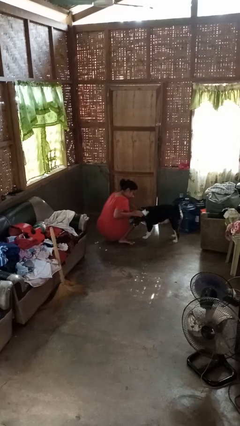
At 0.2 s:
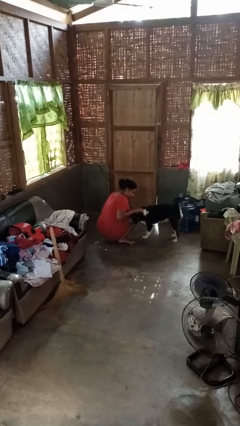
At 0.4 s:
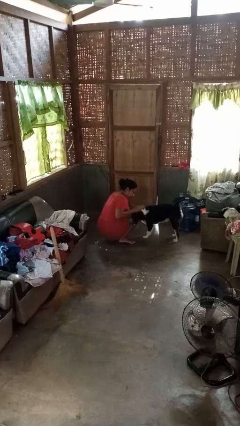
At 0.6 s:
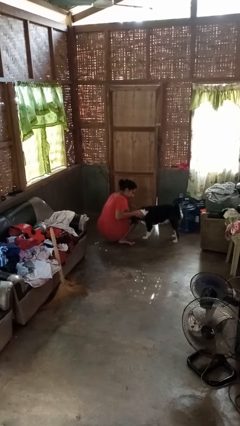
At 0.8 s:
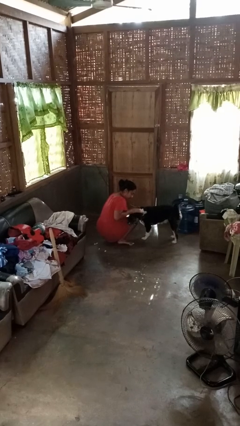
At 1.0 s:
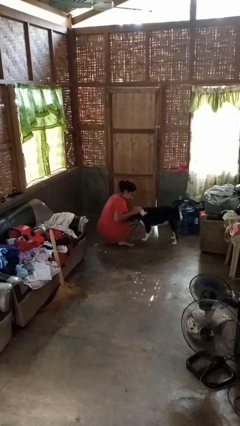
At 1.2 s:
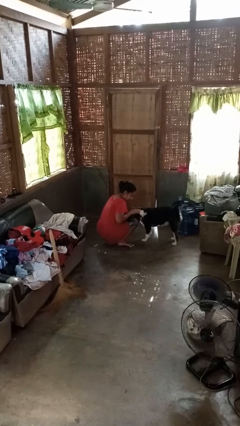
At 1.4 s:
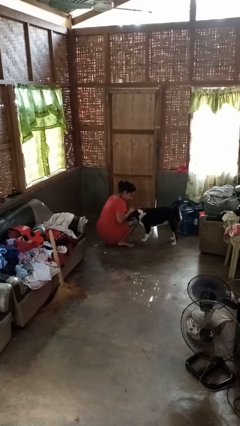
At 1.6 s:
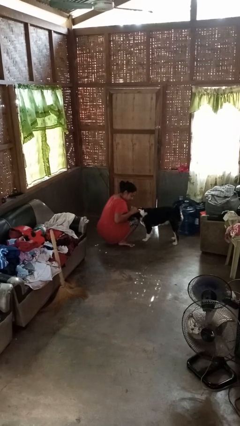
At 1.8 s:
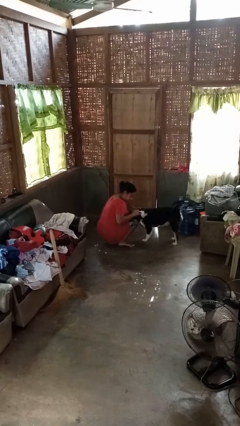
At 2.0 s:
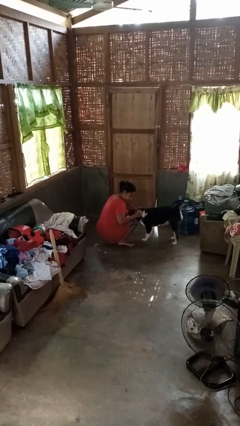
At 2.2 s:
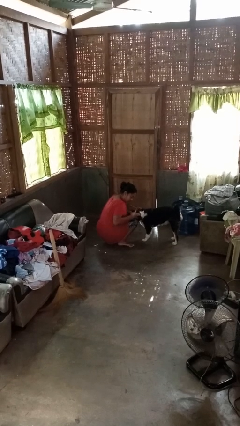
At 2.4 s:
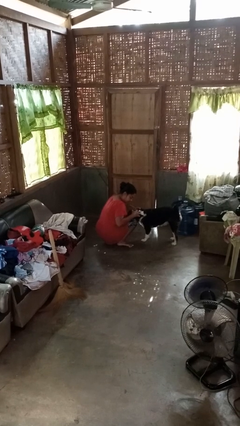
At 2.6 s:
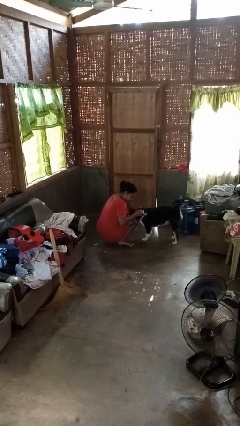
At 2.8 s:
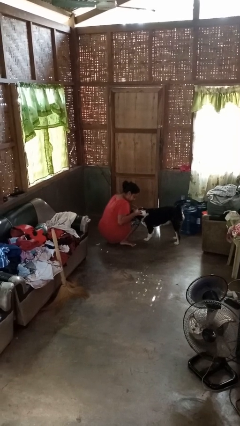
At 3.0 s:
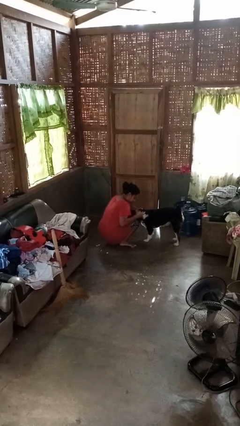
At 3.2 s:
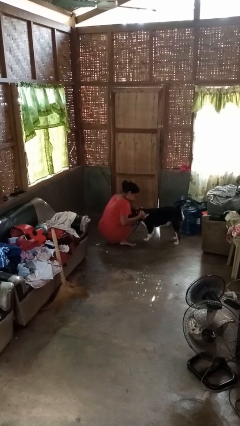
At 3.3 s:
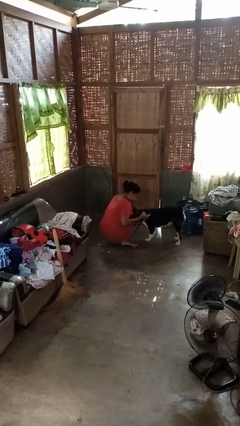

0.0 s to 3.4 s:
person pets dog

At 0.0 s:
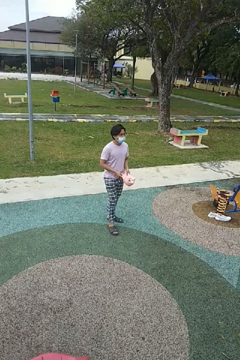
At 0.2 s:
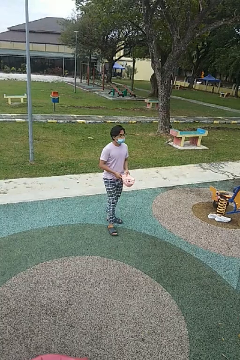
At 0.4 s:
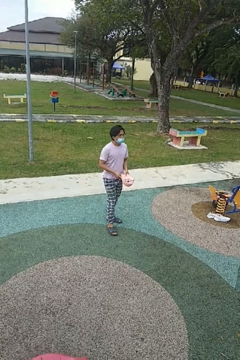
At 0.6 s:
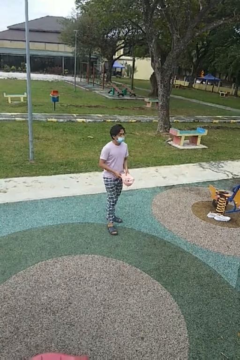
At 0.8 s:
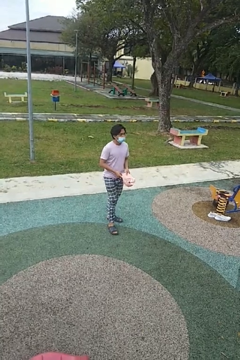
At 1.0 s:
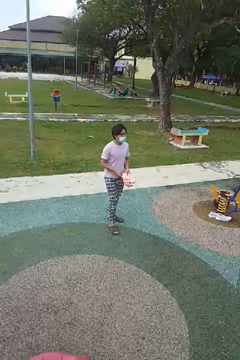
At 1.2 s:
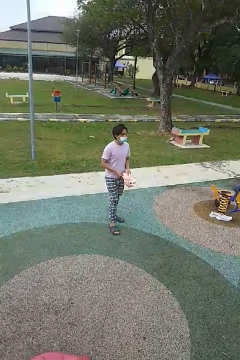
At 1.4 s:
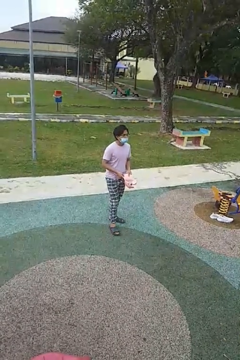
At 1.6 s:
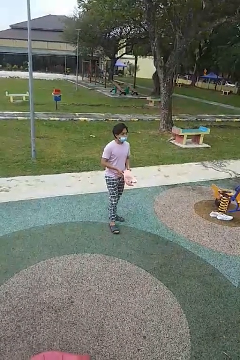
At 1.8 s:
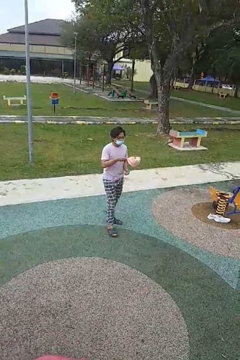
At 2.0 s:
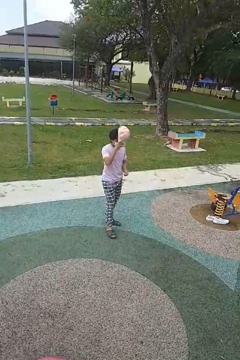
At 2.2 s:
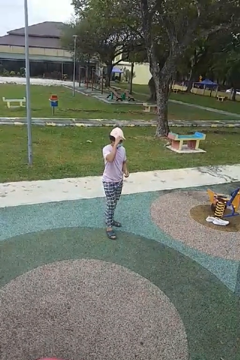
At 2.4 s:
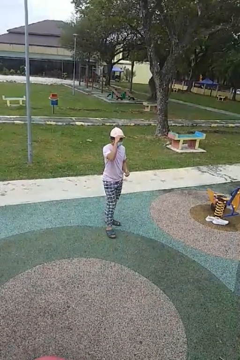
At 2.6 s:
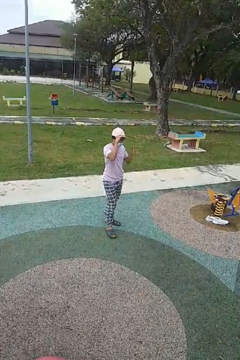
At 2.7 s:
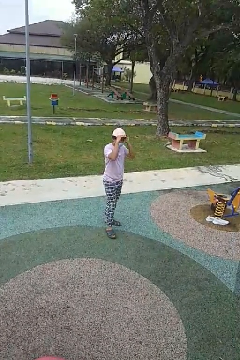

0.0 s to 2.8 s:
person puts on hat

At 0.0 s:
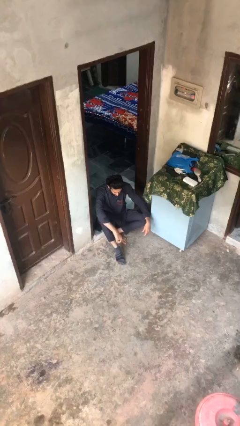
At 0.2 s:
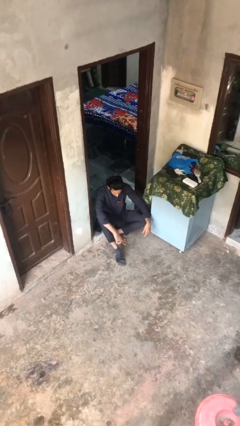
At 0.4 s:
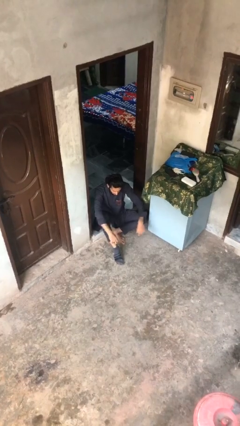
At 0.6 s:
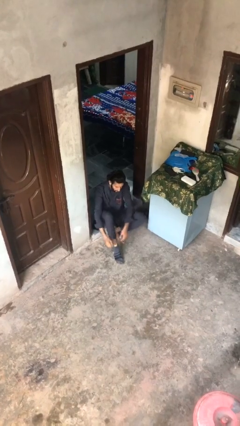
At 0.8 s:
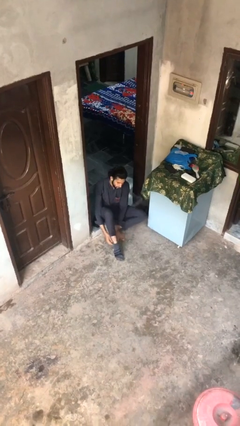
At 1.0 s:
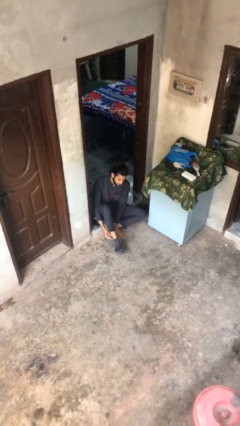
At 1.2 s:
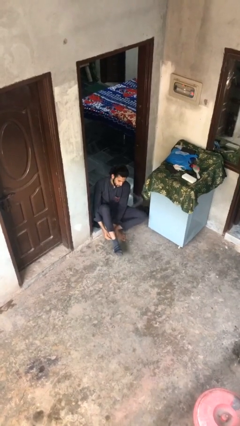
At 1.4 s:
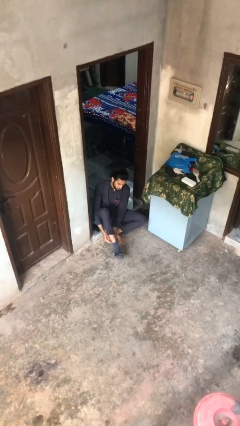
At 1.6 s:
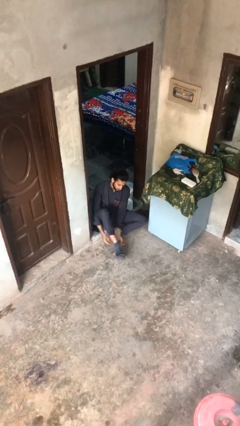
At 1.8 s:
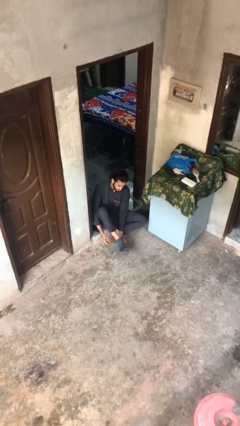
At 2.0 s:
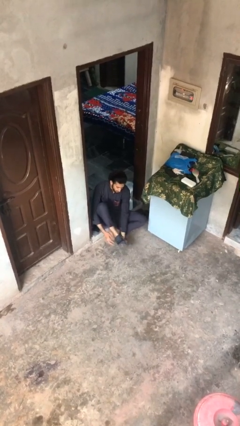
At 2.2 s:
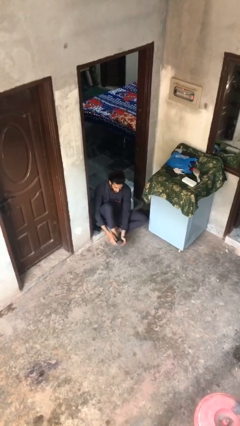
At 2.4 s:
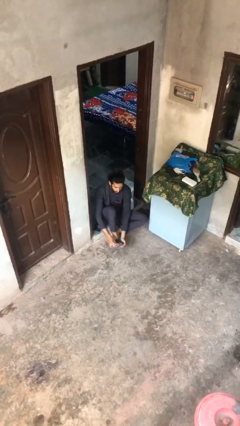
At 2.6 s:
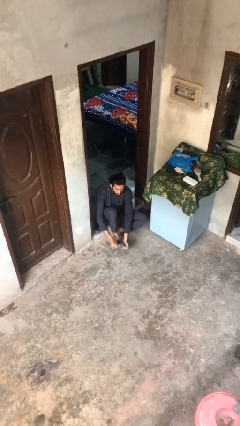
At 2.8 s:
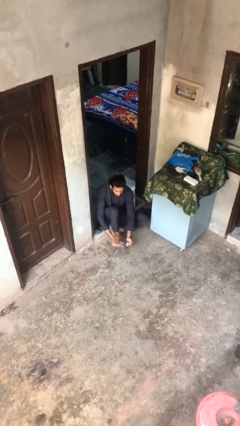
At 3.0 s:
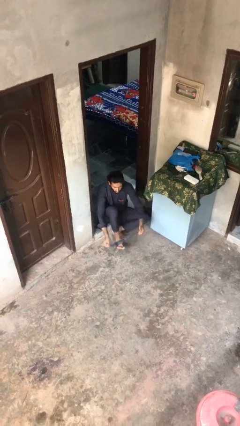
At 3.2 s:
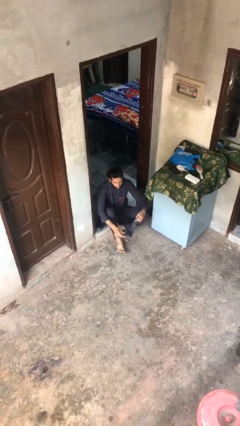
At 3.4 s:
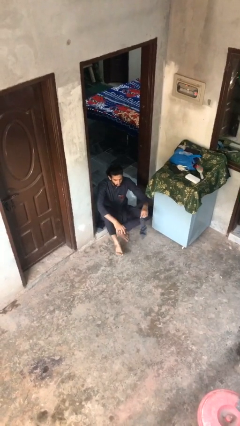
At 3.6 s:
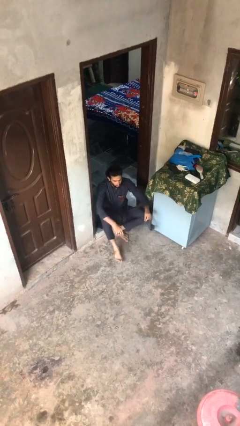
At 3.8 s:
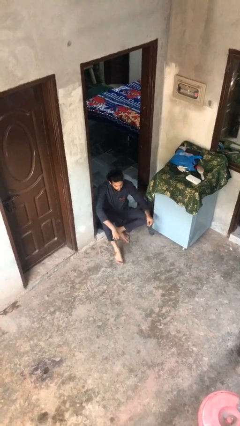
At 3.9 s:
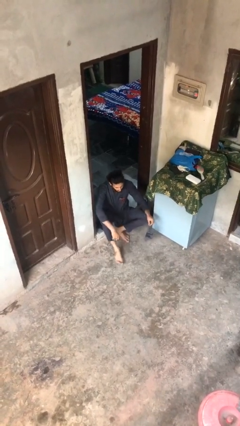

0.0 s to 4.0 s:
person takes off socks

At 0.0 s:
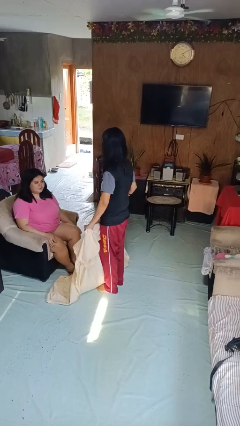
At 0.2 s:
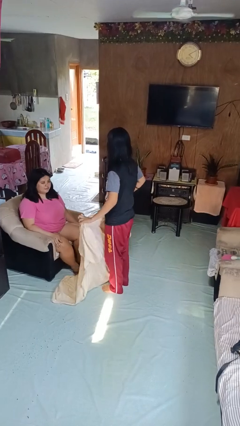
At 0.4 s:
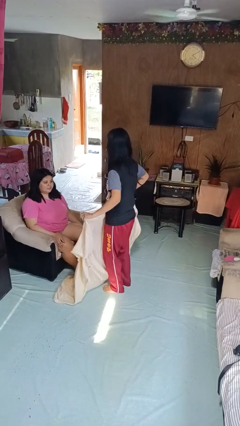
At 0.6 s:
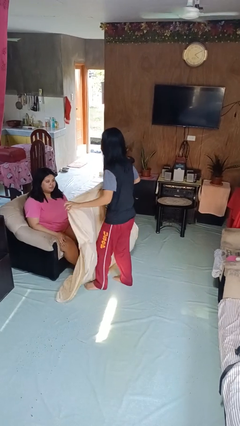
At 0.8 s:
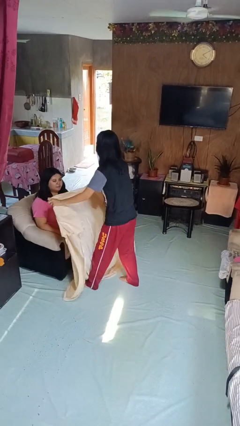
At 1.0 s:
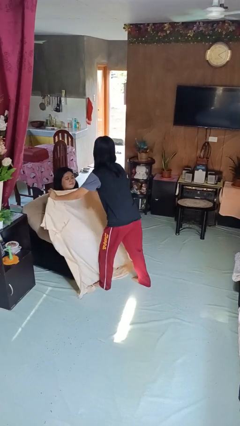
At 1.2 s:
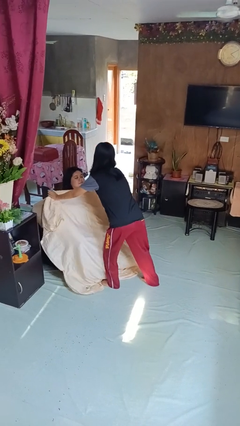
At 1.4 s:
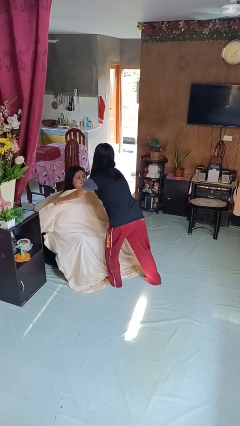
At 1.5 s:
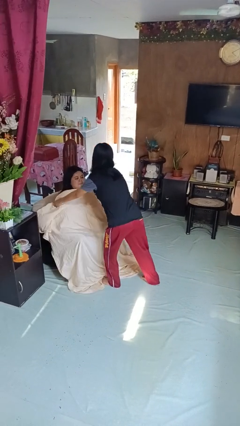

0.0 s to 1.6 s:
person covers friend with blanket

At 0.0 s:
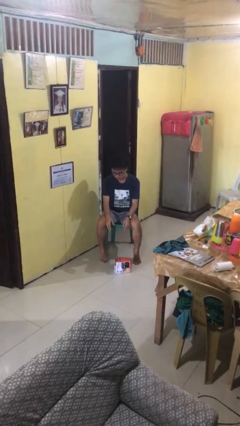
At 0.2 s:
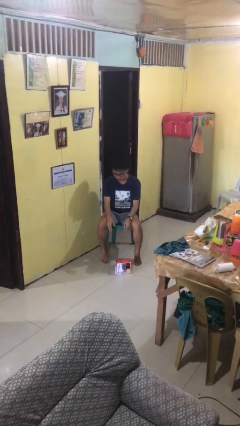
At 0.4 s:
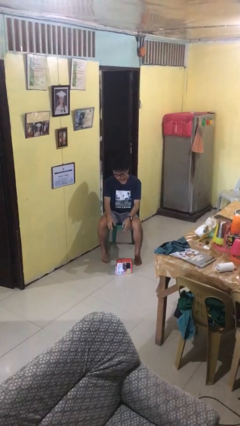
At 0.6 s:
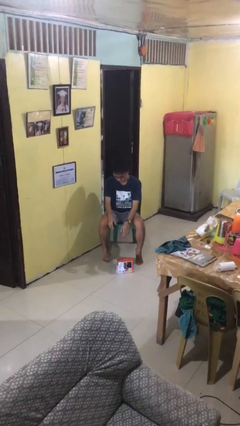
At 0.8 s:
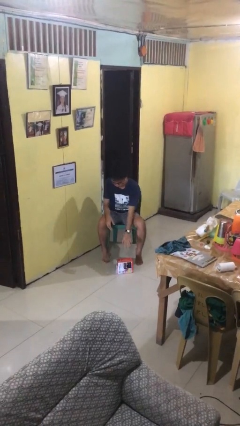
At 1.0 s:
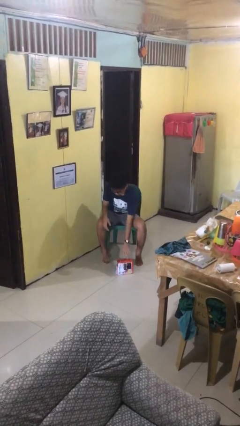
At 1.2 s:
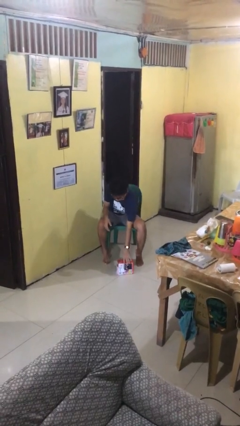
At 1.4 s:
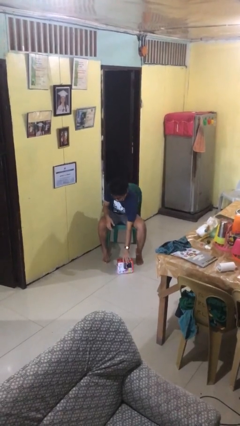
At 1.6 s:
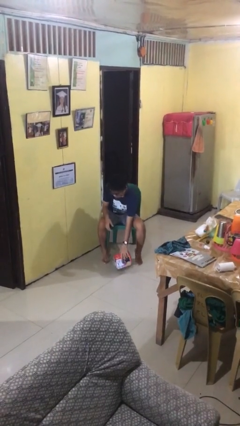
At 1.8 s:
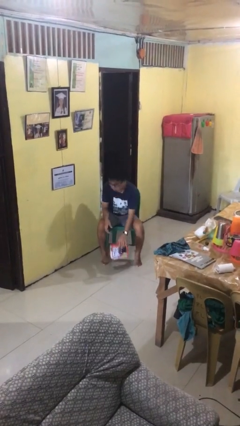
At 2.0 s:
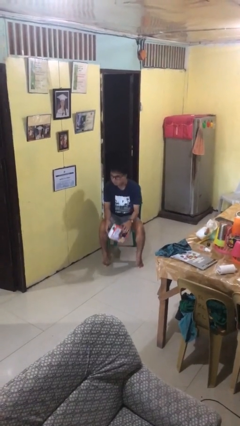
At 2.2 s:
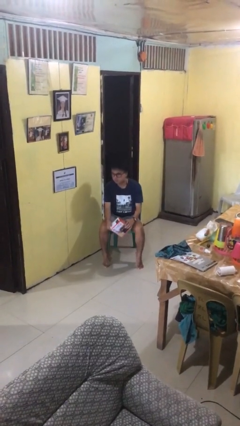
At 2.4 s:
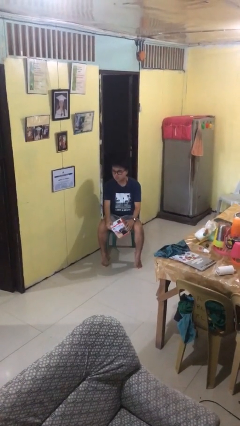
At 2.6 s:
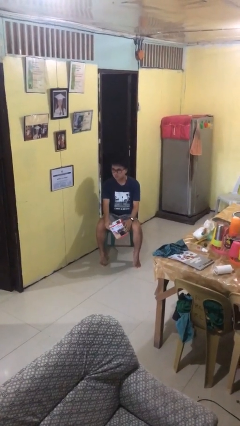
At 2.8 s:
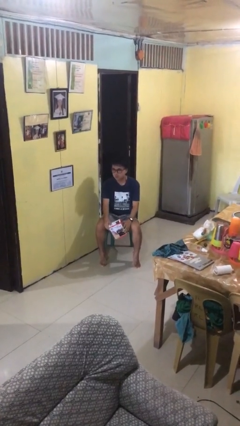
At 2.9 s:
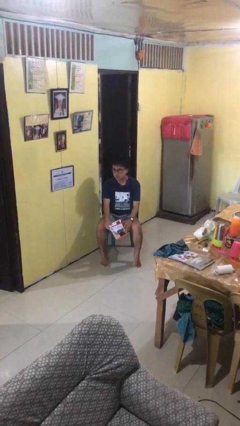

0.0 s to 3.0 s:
person picks up object from floor

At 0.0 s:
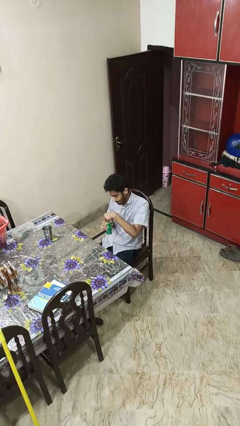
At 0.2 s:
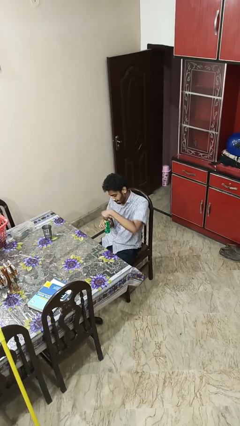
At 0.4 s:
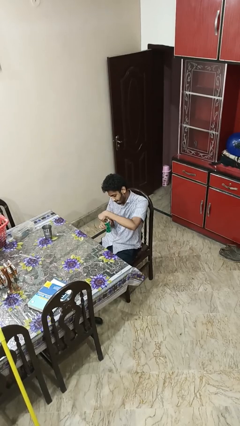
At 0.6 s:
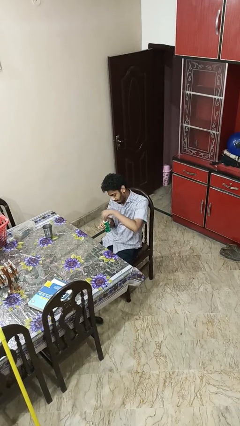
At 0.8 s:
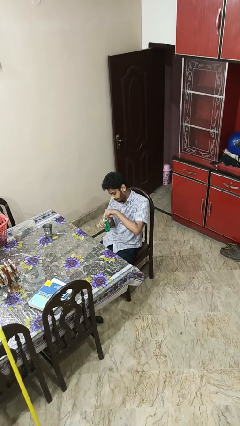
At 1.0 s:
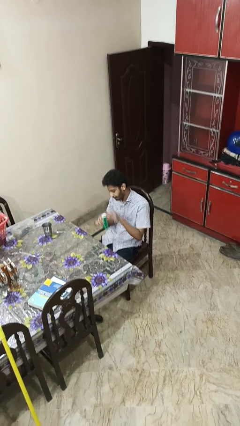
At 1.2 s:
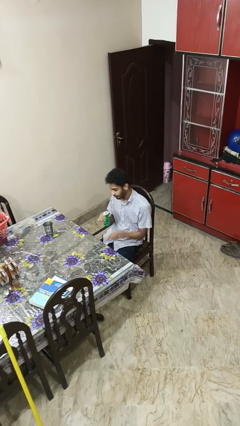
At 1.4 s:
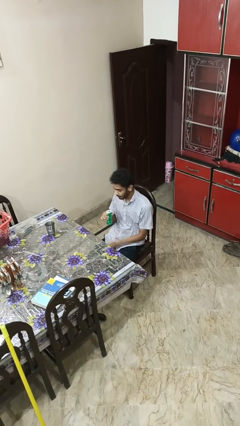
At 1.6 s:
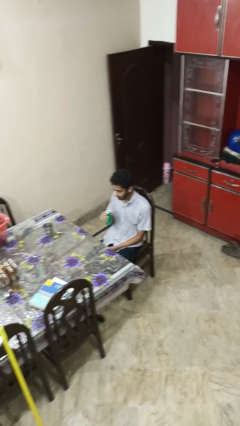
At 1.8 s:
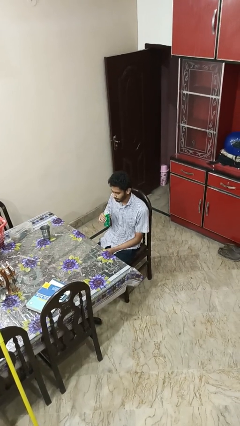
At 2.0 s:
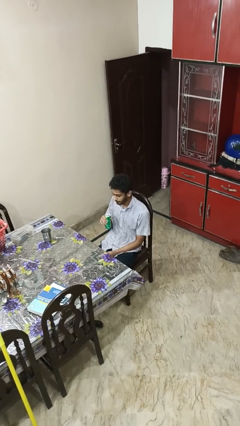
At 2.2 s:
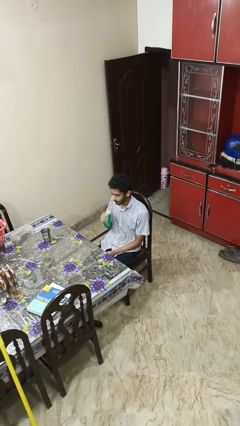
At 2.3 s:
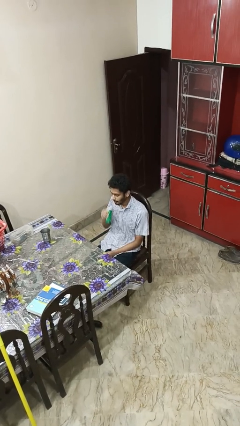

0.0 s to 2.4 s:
person opens beverage can

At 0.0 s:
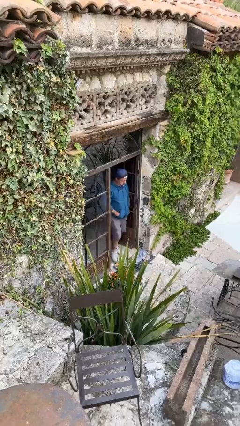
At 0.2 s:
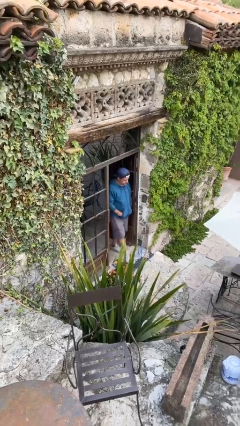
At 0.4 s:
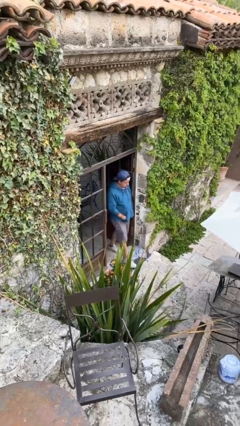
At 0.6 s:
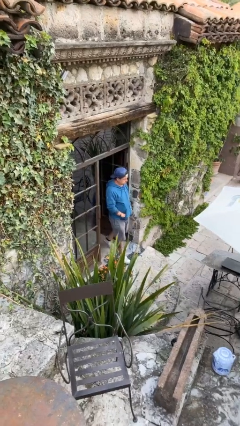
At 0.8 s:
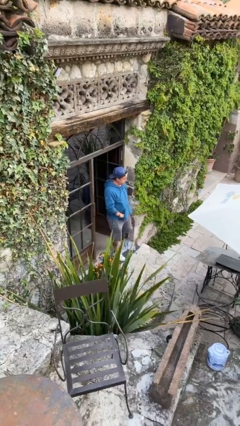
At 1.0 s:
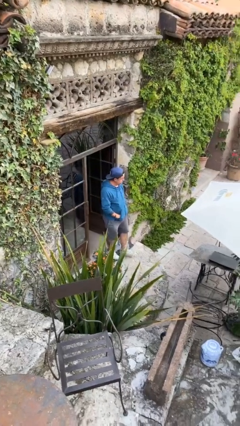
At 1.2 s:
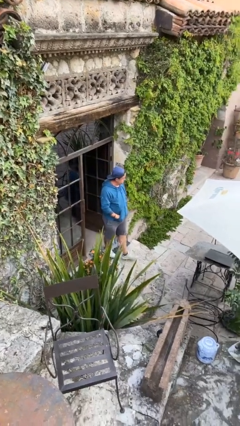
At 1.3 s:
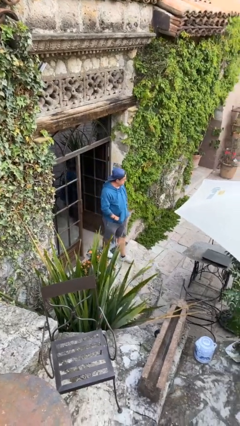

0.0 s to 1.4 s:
person enters scene through structure
